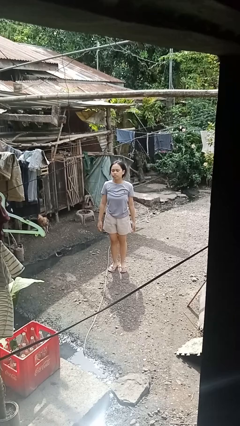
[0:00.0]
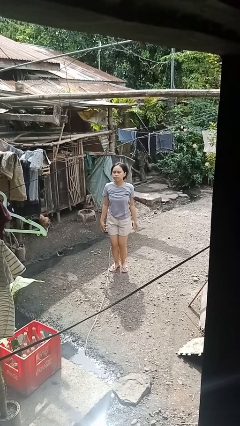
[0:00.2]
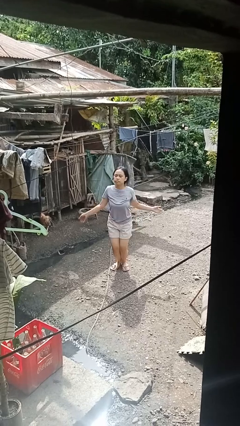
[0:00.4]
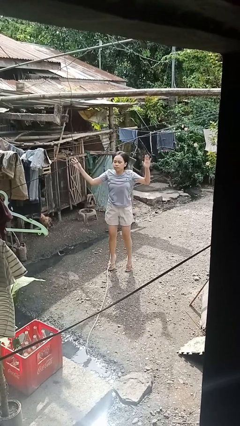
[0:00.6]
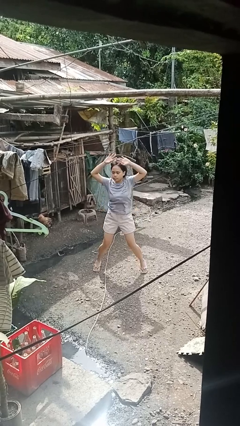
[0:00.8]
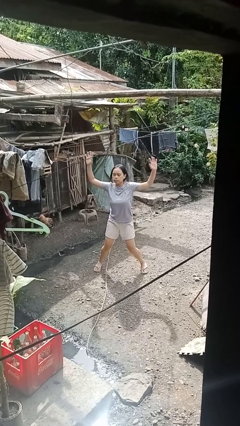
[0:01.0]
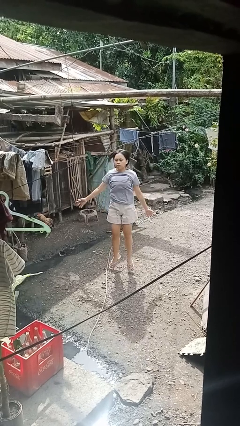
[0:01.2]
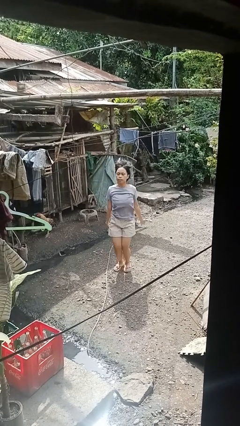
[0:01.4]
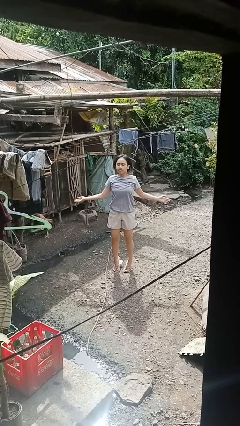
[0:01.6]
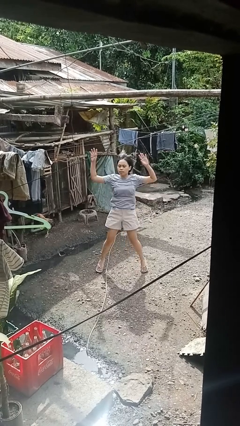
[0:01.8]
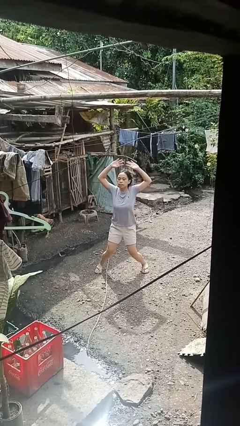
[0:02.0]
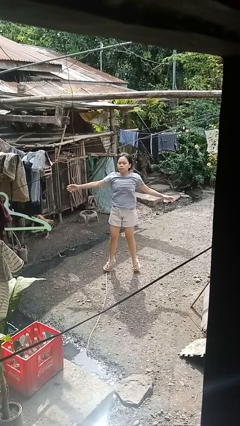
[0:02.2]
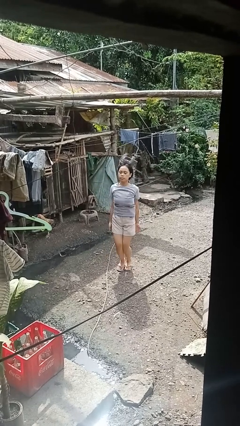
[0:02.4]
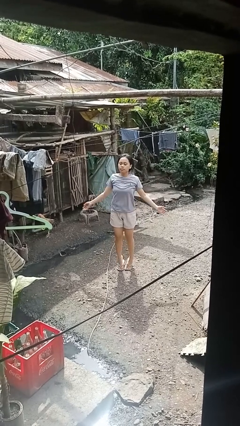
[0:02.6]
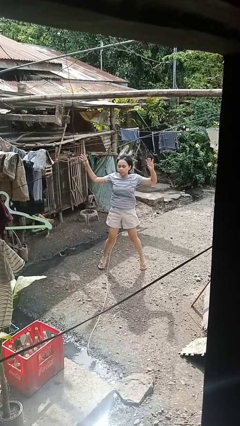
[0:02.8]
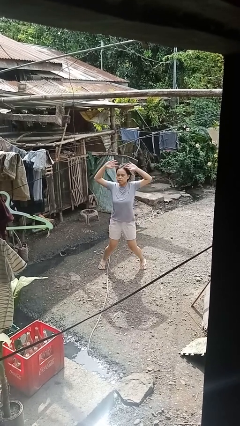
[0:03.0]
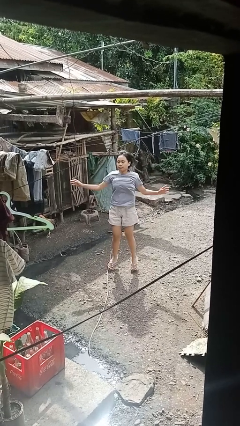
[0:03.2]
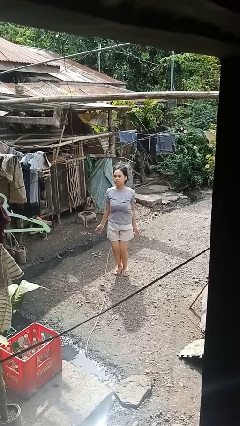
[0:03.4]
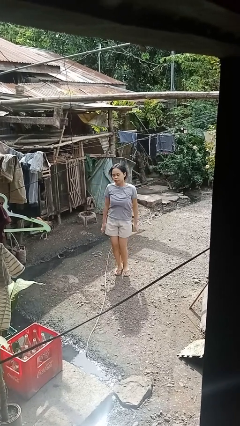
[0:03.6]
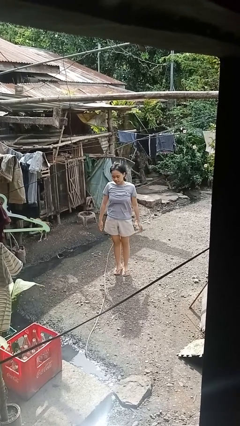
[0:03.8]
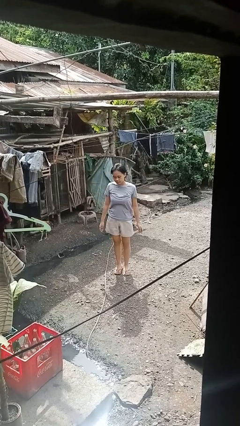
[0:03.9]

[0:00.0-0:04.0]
person exercises with jumping jacks

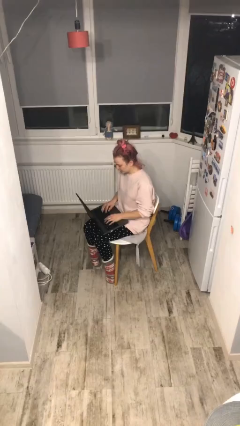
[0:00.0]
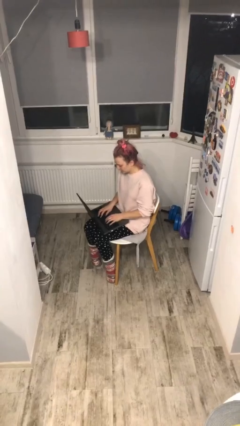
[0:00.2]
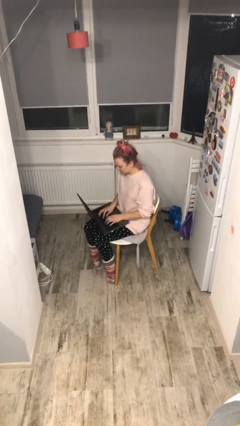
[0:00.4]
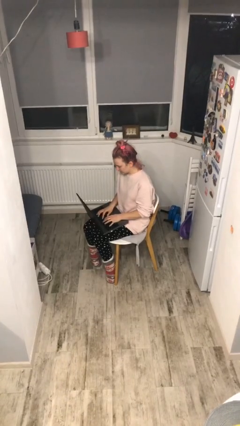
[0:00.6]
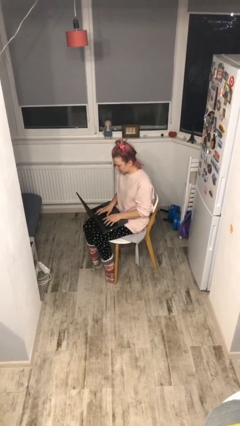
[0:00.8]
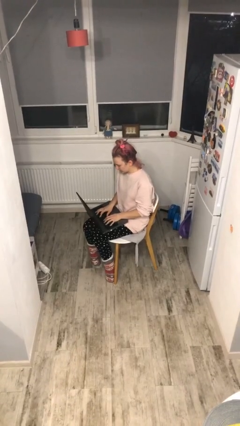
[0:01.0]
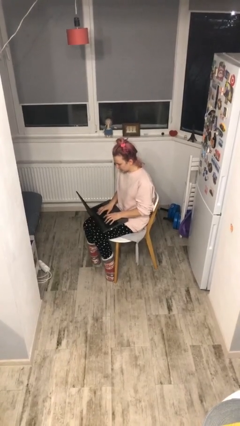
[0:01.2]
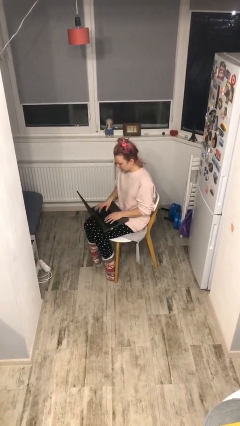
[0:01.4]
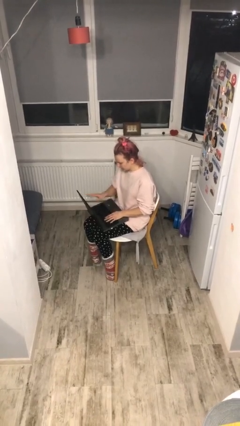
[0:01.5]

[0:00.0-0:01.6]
person interacts with laptop

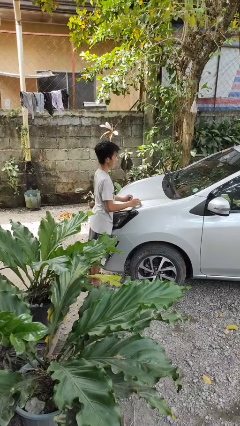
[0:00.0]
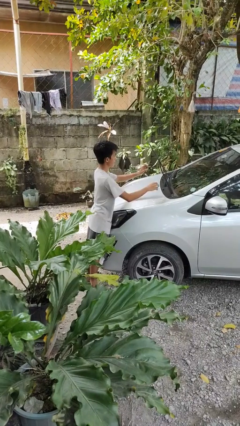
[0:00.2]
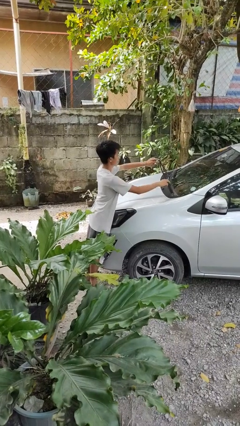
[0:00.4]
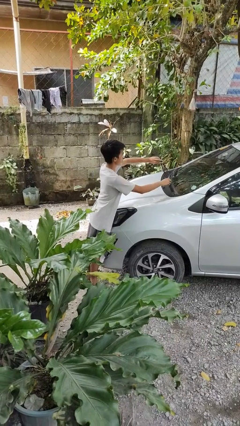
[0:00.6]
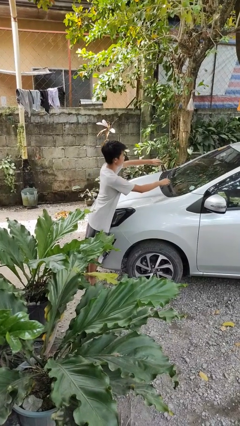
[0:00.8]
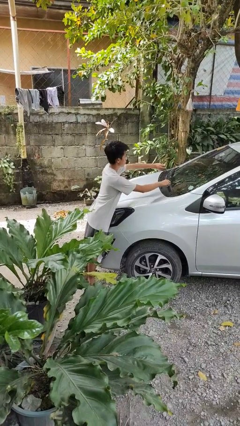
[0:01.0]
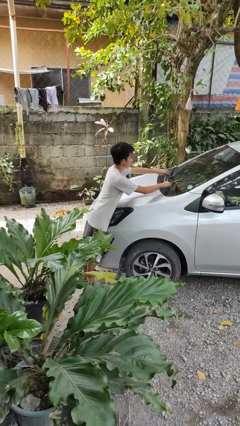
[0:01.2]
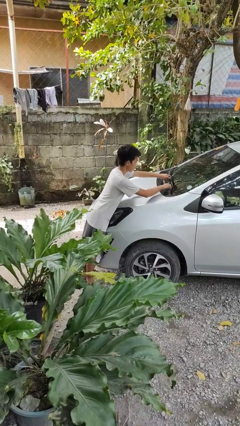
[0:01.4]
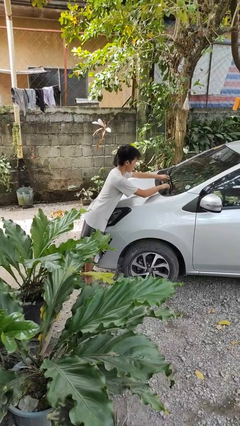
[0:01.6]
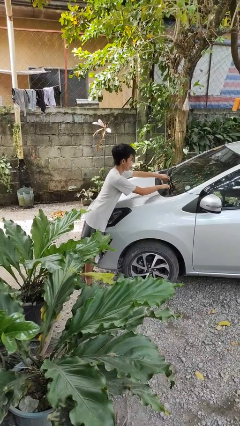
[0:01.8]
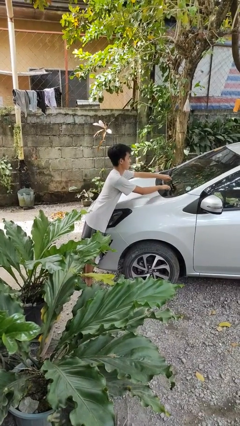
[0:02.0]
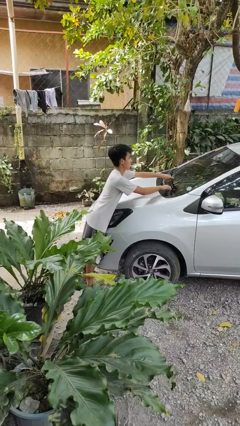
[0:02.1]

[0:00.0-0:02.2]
person flips down car wipers

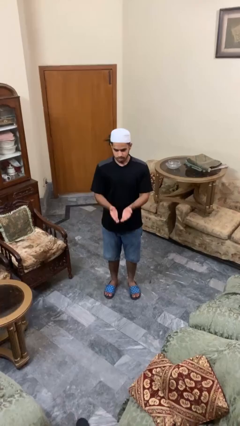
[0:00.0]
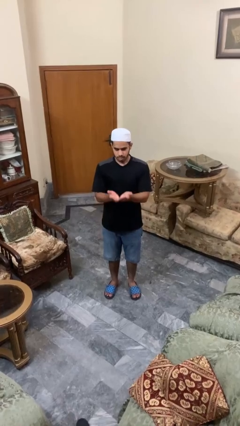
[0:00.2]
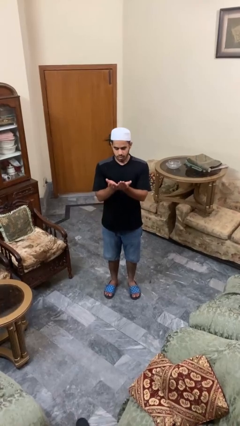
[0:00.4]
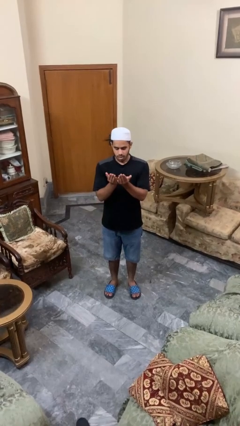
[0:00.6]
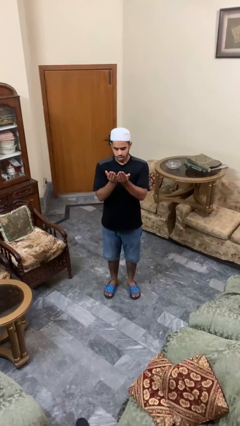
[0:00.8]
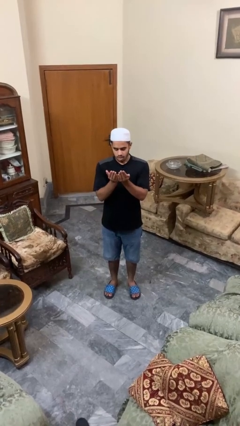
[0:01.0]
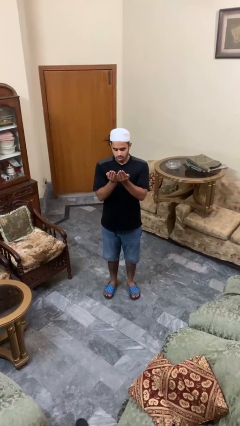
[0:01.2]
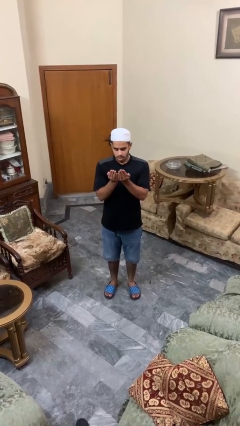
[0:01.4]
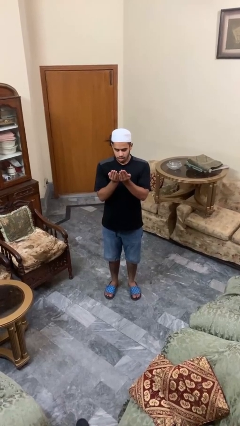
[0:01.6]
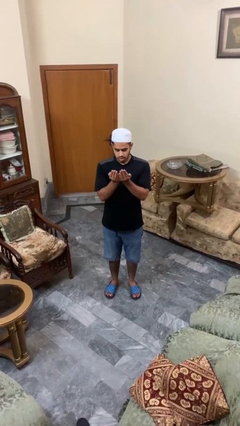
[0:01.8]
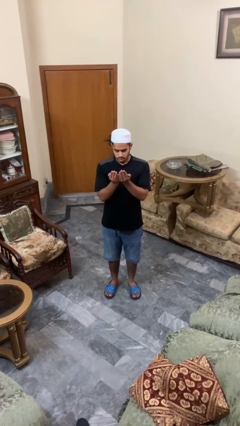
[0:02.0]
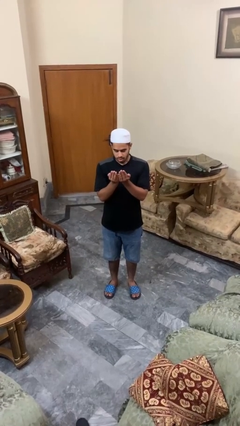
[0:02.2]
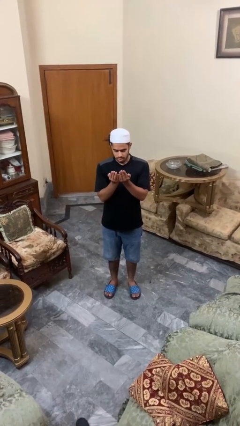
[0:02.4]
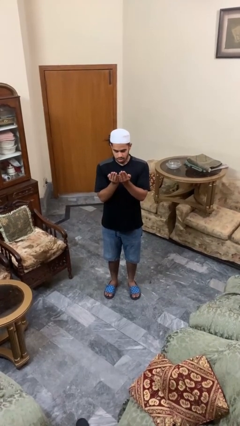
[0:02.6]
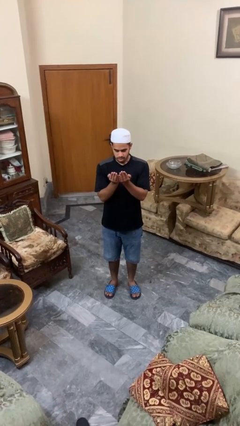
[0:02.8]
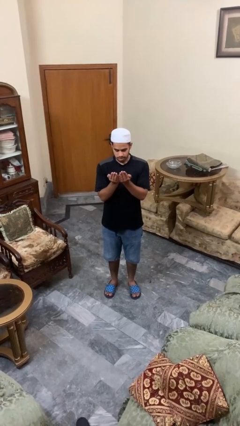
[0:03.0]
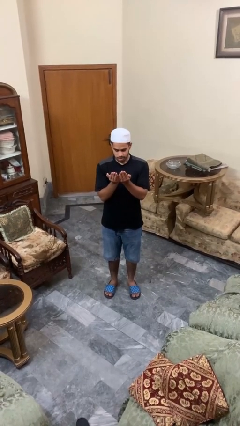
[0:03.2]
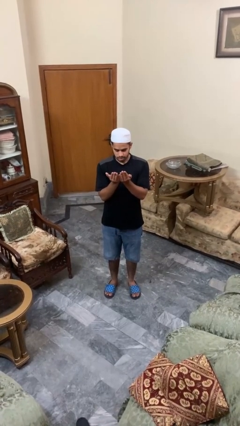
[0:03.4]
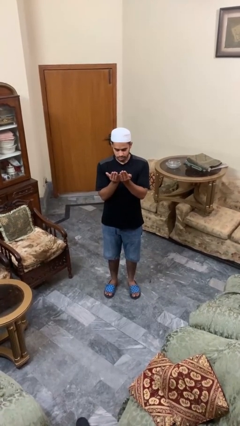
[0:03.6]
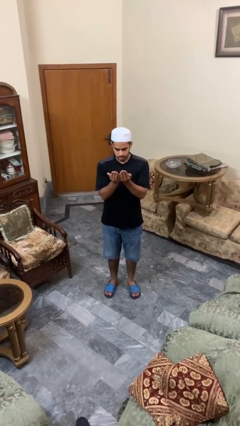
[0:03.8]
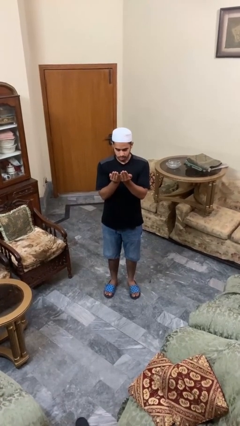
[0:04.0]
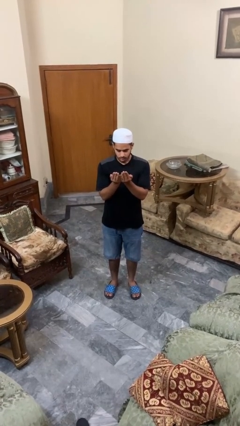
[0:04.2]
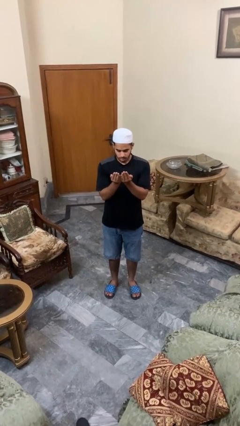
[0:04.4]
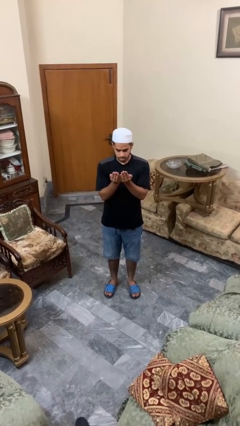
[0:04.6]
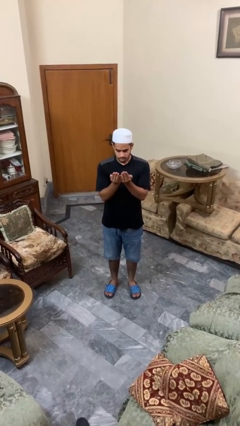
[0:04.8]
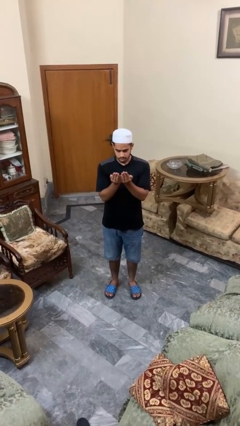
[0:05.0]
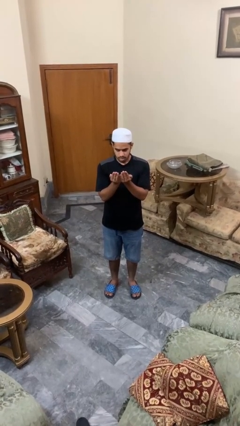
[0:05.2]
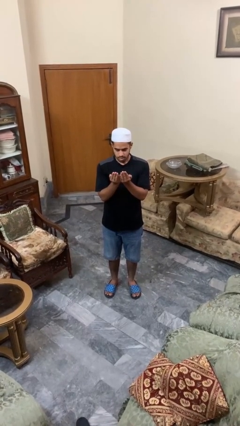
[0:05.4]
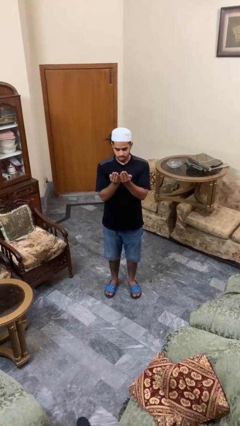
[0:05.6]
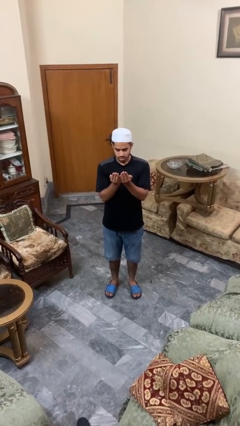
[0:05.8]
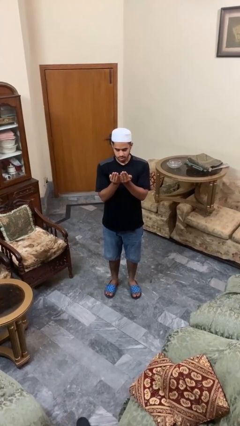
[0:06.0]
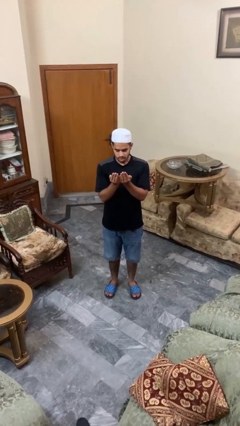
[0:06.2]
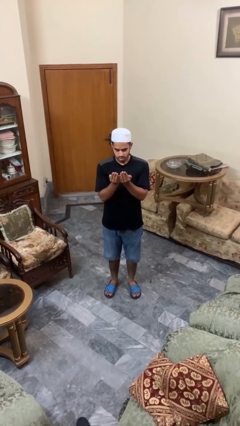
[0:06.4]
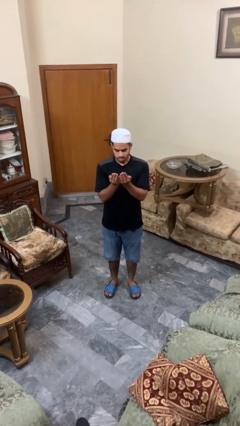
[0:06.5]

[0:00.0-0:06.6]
person prays

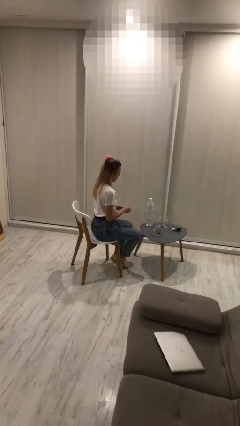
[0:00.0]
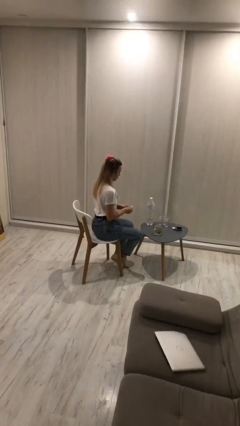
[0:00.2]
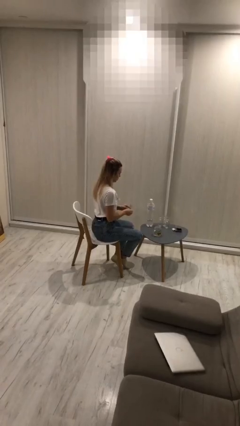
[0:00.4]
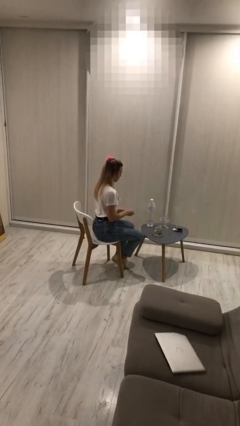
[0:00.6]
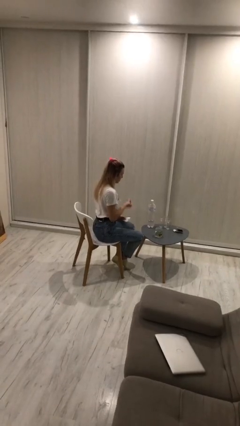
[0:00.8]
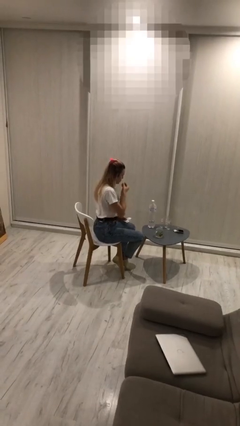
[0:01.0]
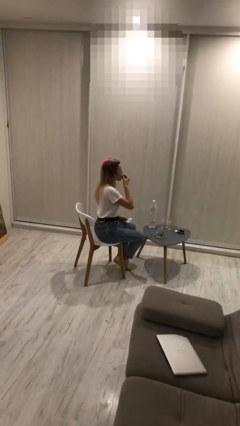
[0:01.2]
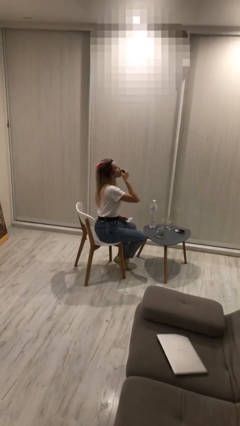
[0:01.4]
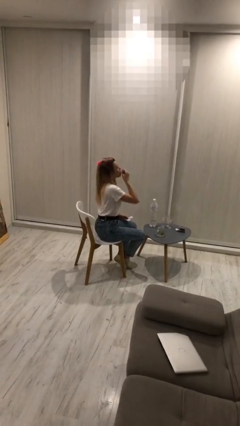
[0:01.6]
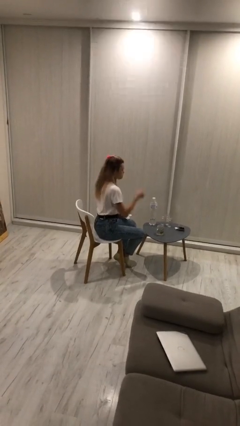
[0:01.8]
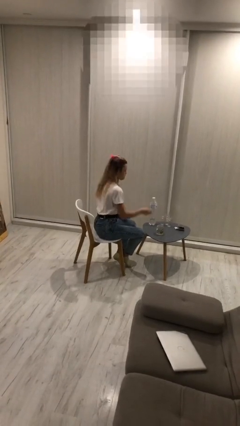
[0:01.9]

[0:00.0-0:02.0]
person takes medicine pills

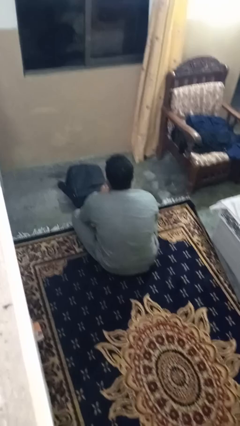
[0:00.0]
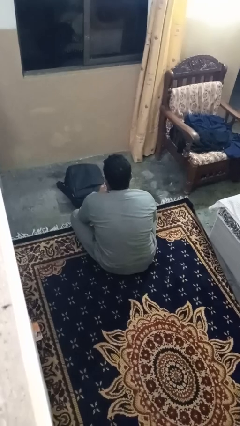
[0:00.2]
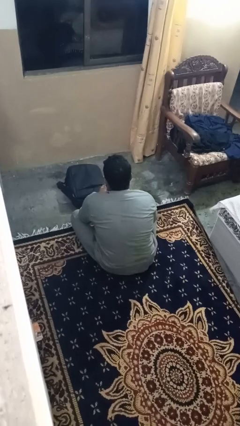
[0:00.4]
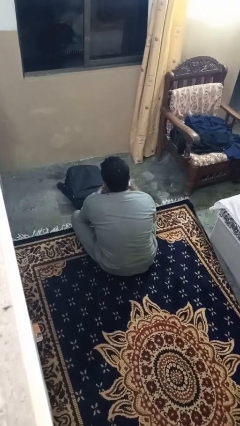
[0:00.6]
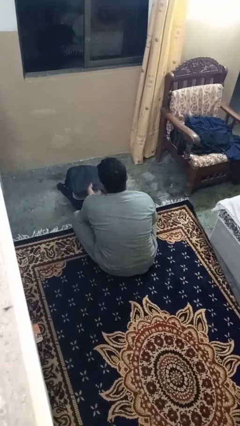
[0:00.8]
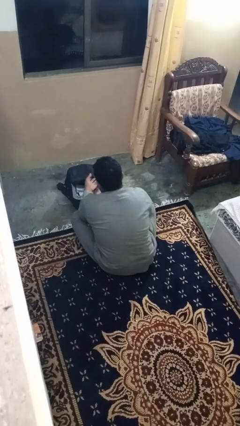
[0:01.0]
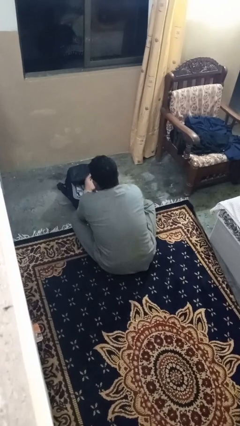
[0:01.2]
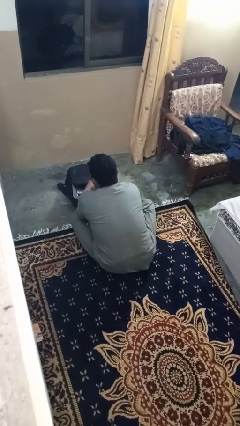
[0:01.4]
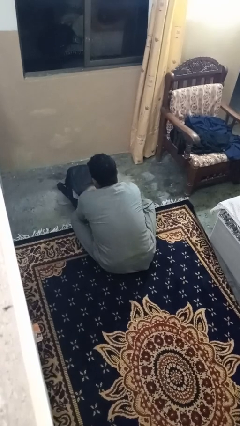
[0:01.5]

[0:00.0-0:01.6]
person puts object into bag
